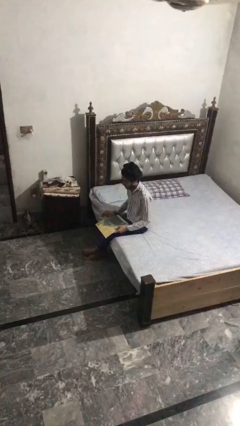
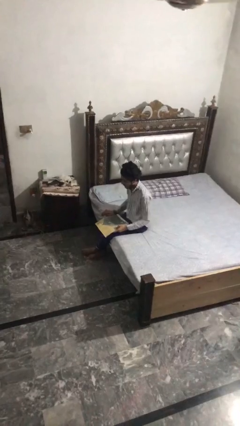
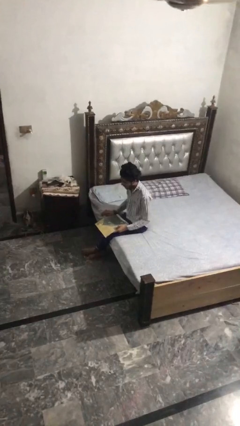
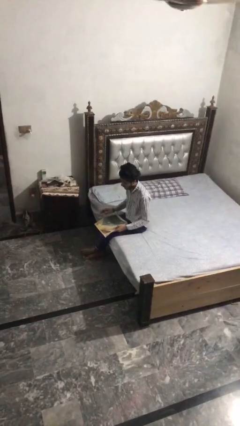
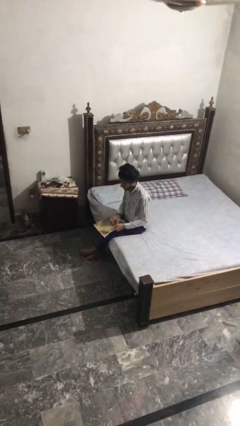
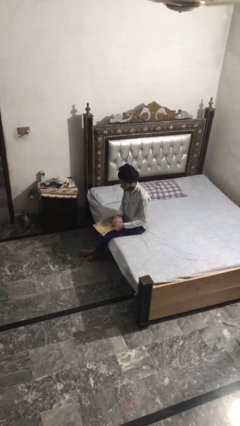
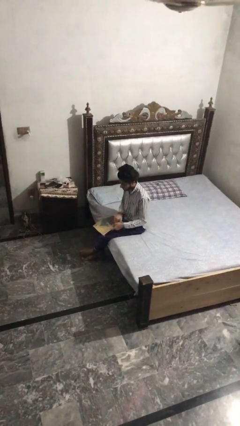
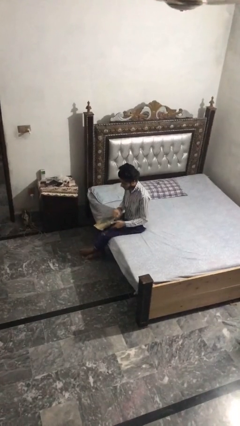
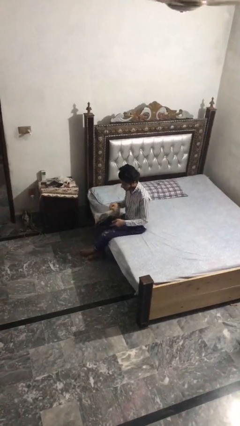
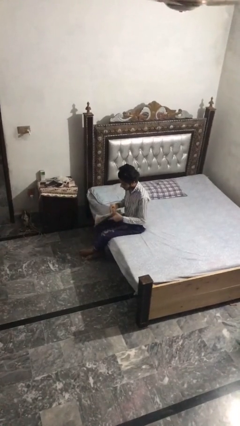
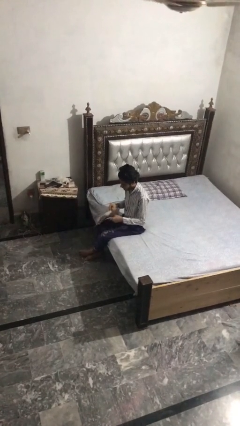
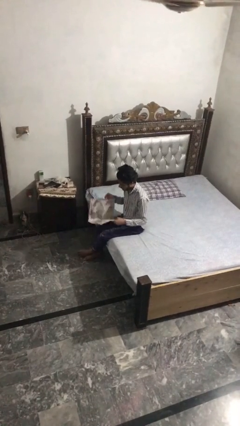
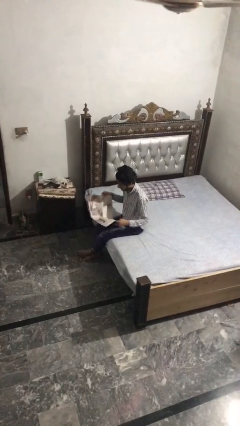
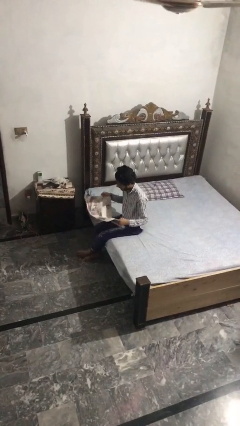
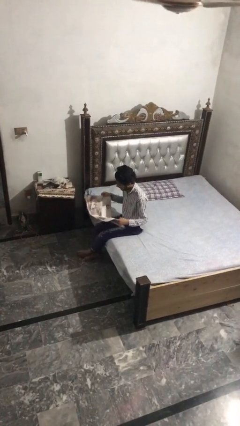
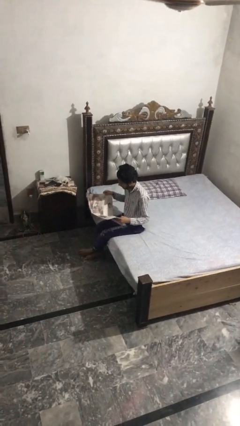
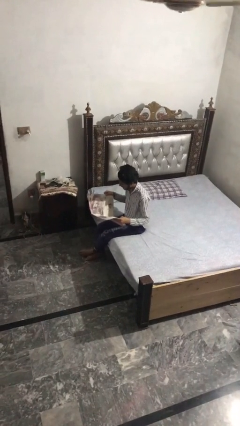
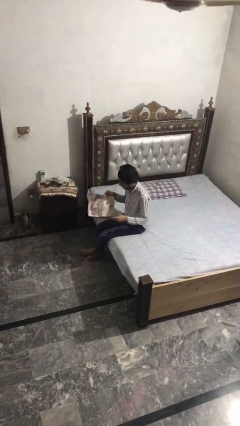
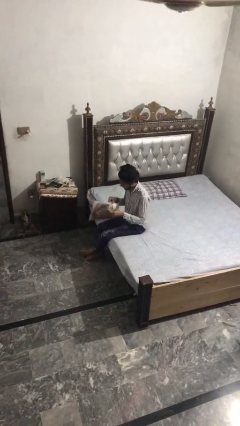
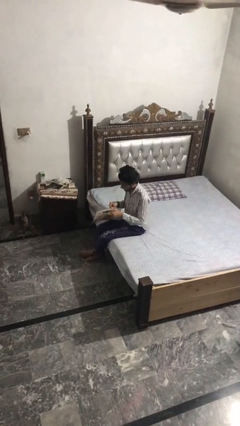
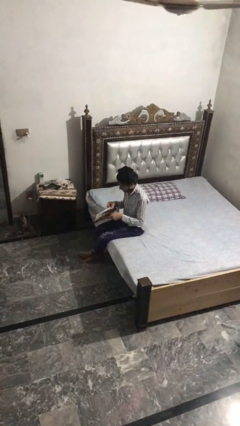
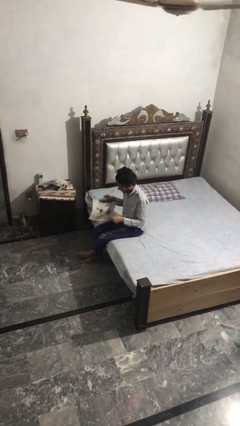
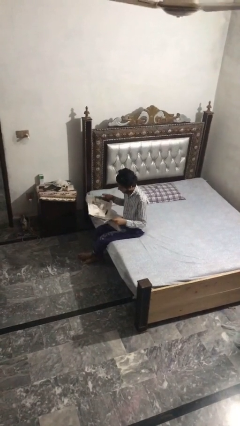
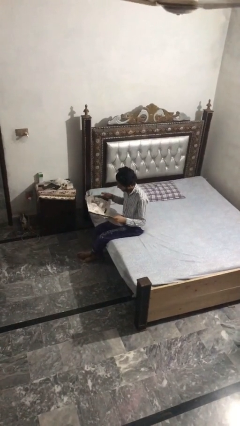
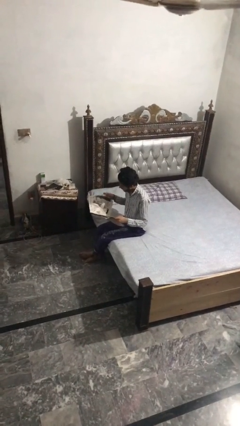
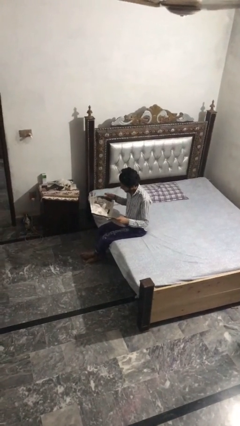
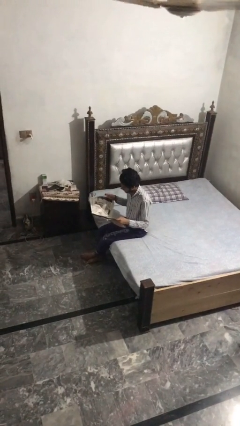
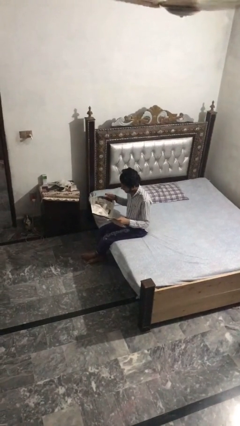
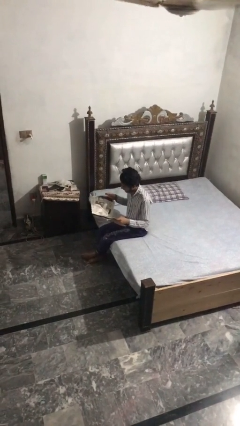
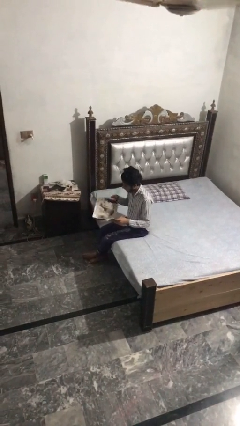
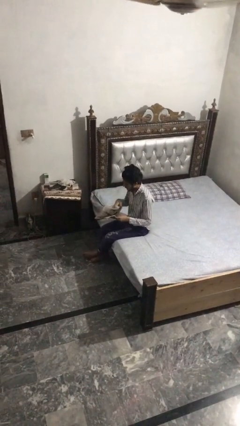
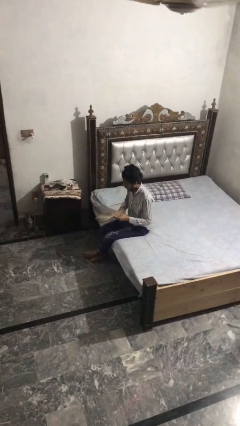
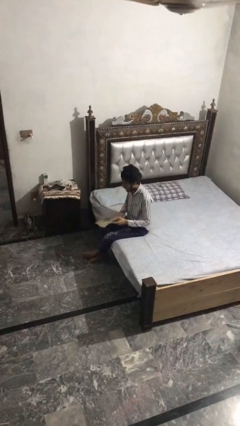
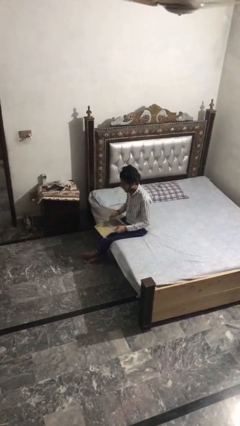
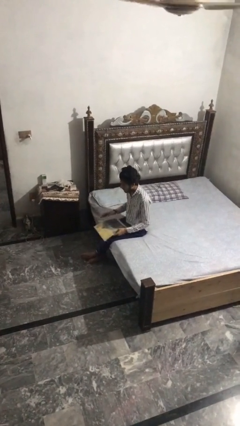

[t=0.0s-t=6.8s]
person reads magazine

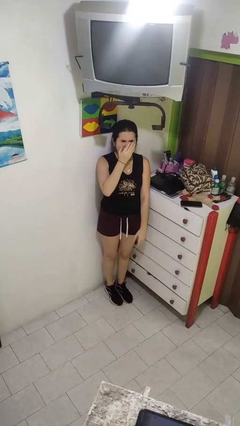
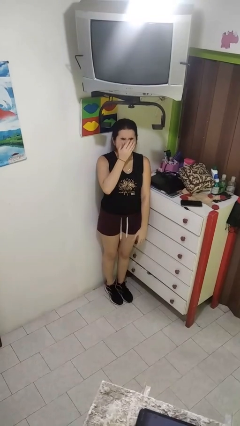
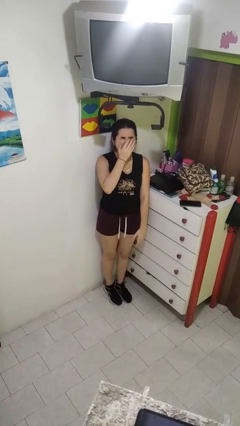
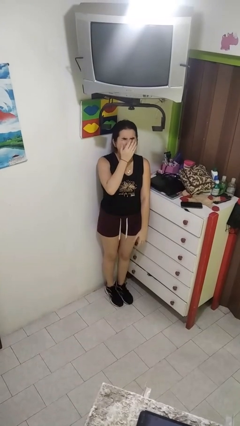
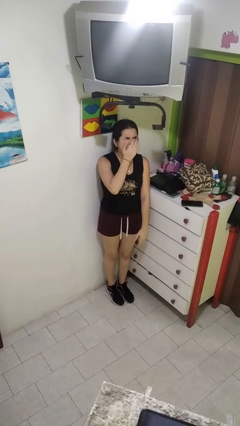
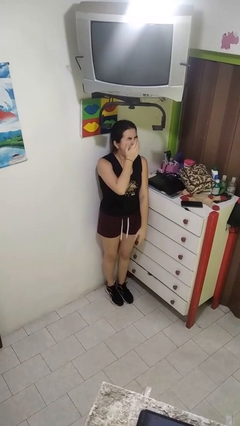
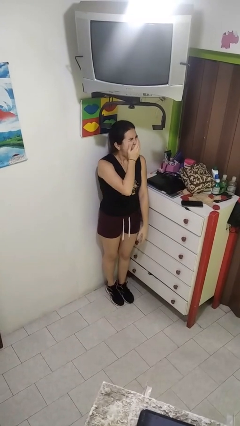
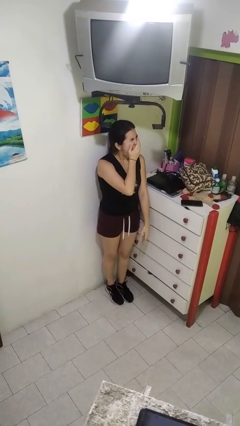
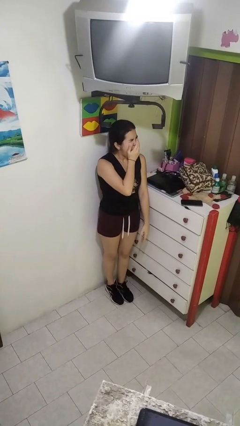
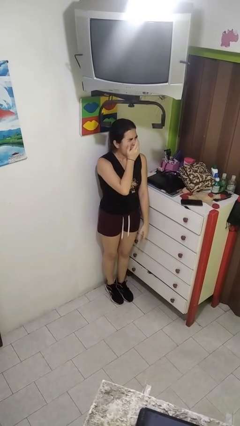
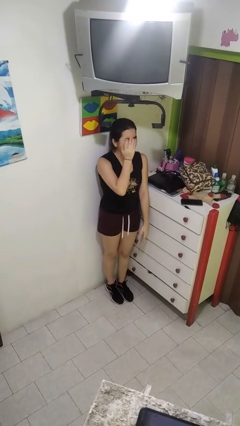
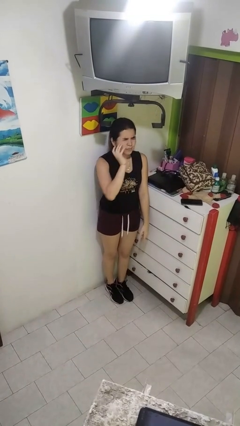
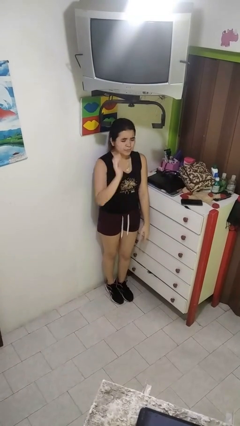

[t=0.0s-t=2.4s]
person yawns

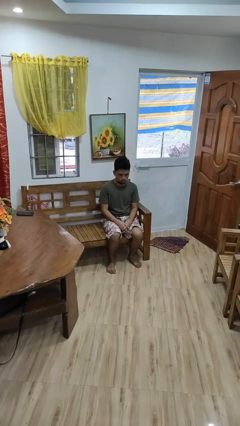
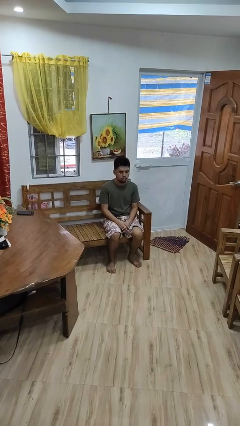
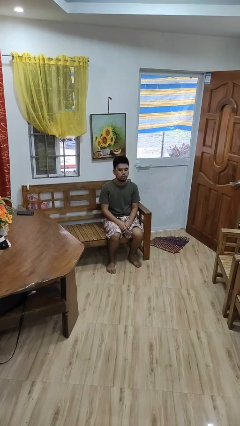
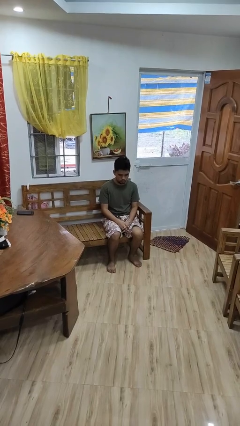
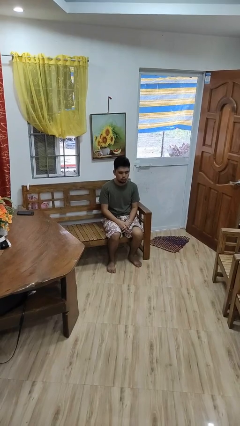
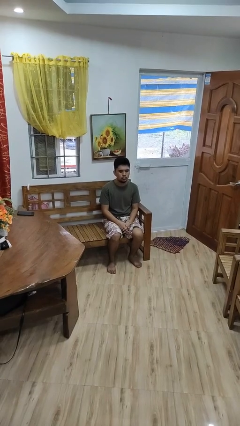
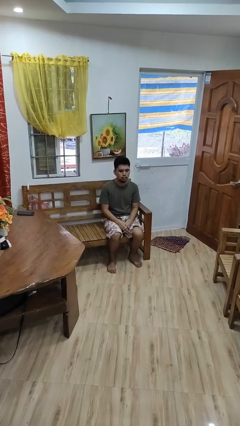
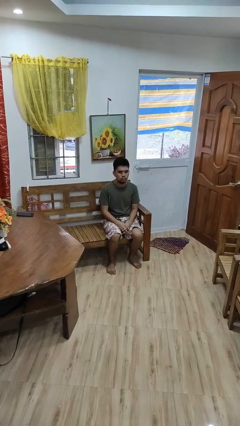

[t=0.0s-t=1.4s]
person nods head

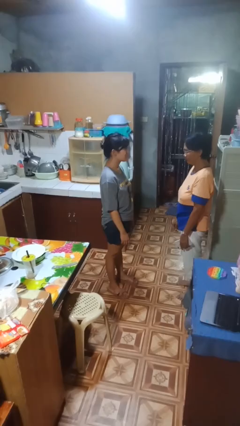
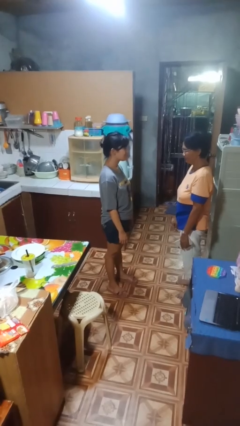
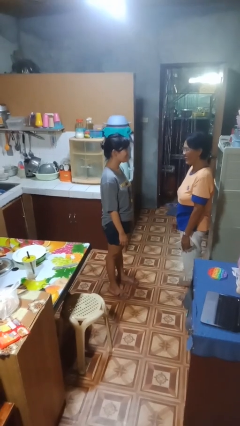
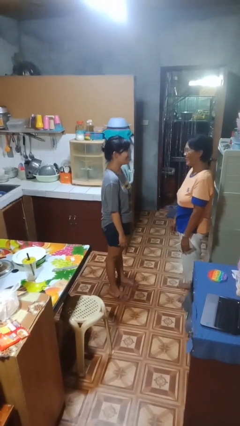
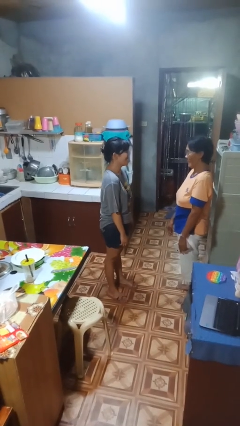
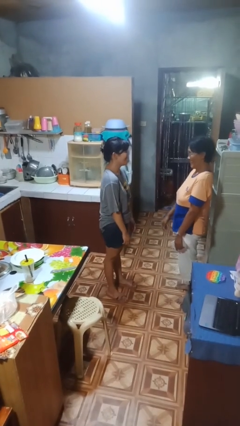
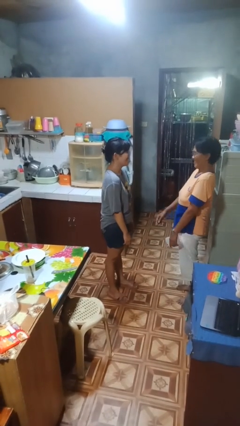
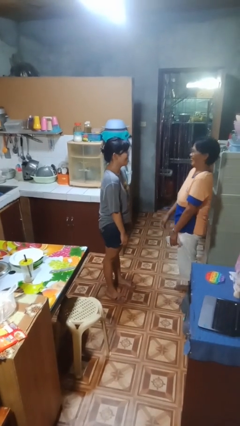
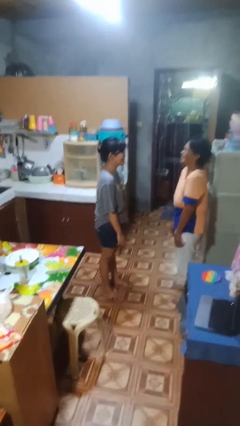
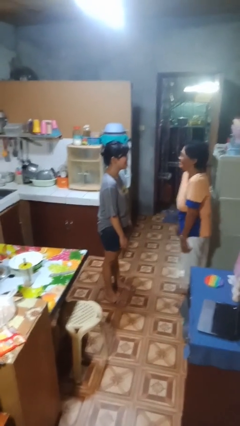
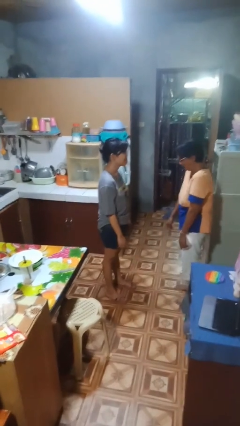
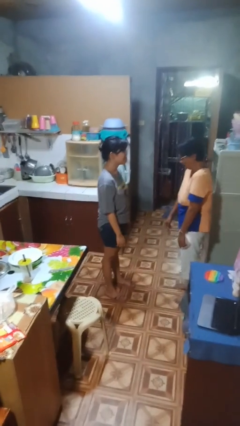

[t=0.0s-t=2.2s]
person laughs with person

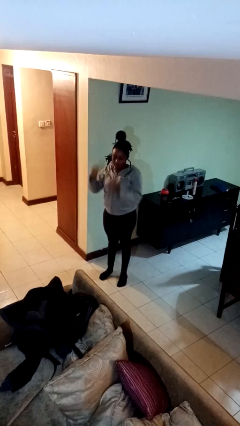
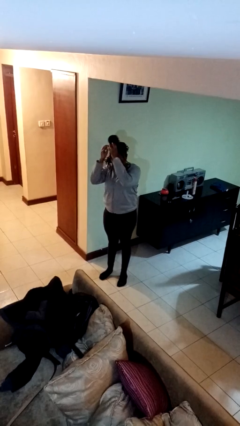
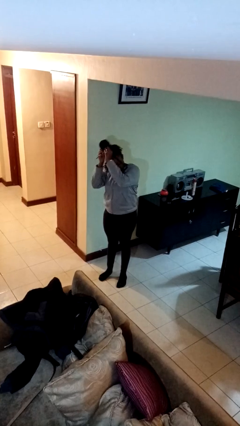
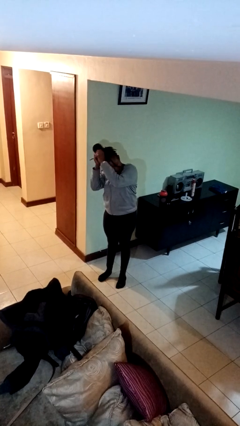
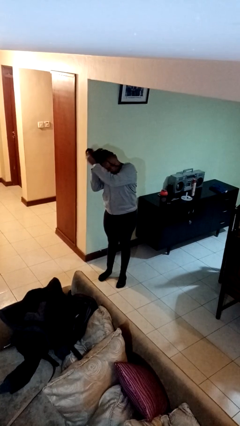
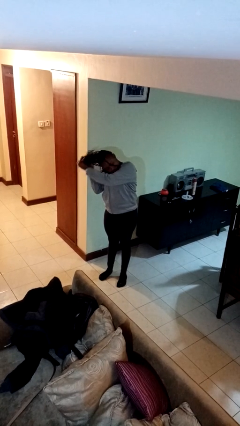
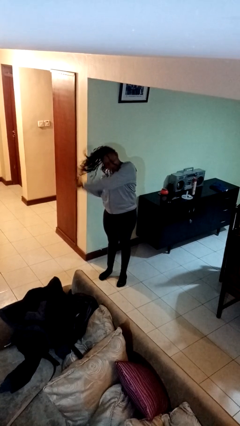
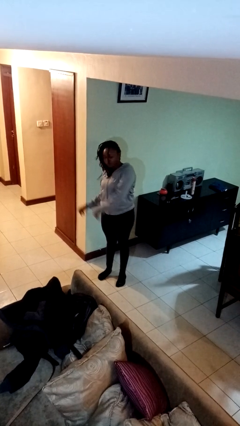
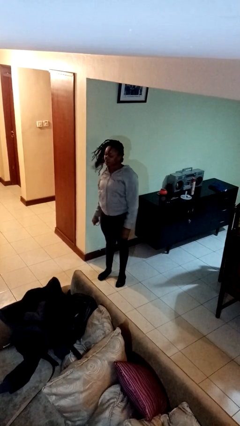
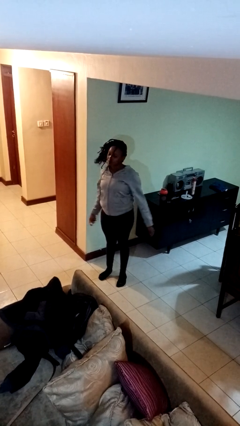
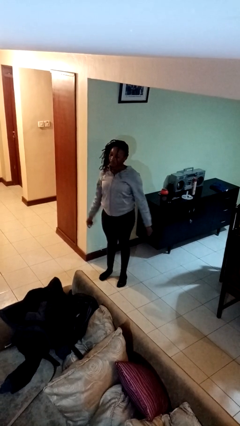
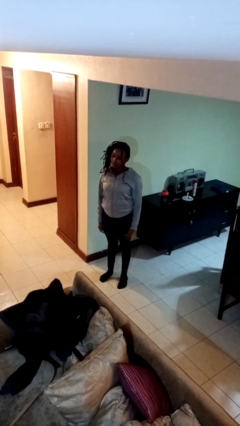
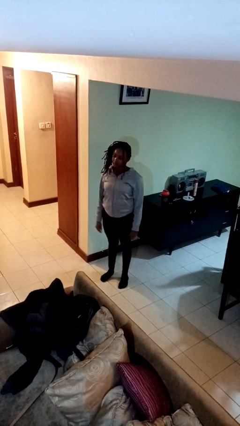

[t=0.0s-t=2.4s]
person takes off hairtie

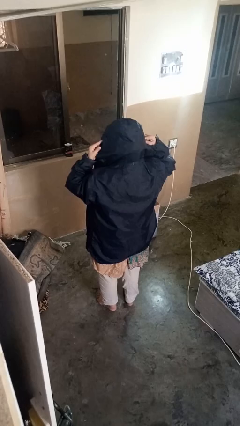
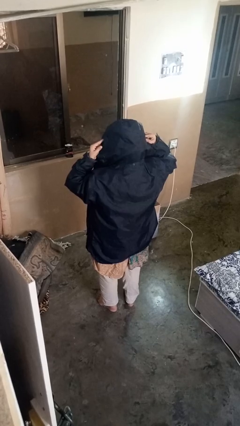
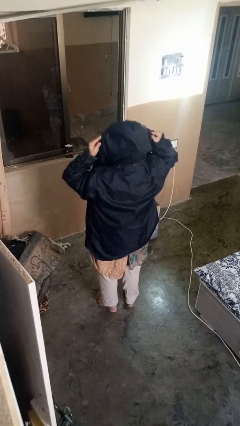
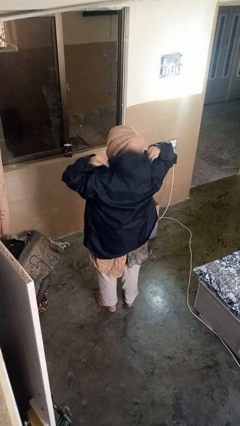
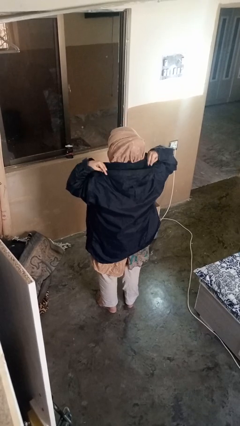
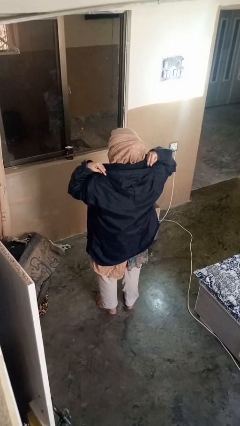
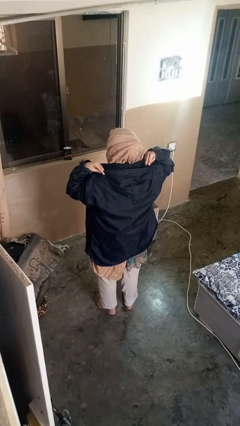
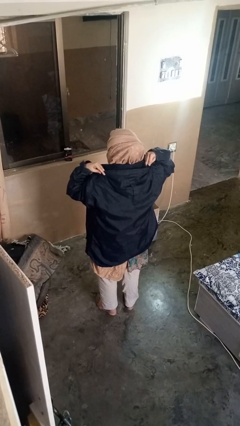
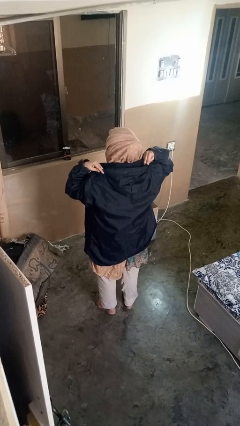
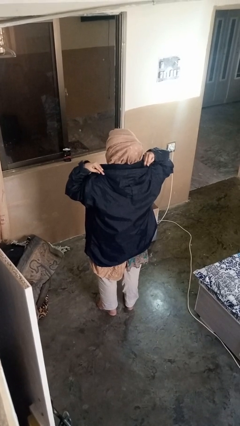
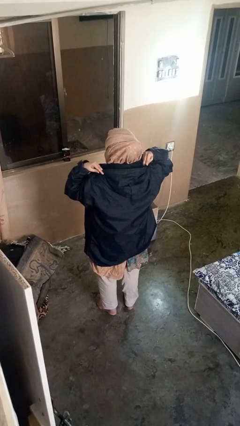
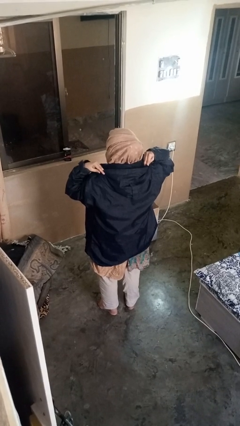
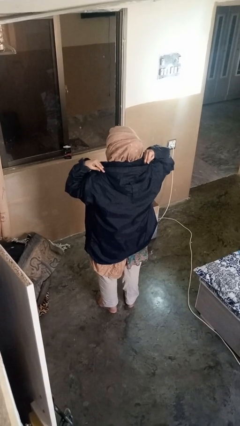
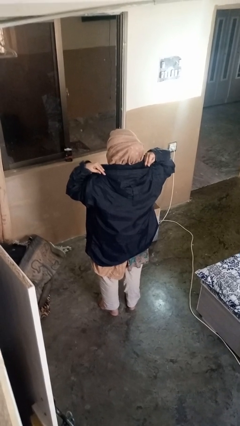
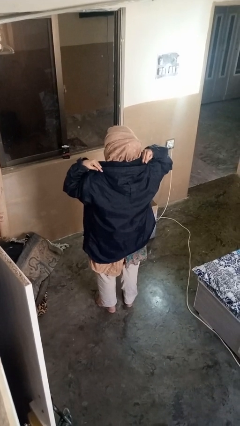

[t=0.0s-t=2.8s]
person takes off hat
